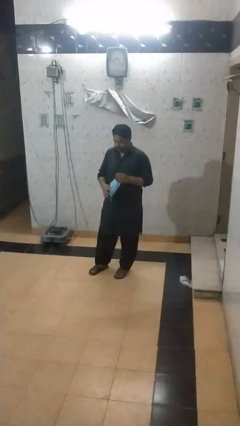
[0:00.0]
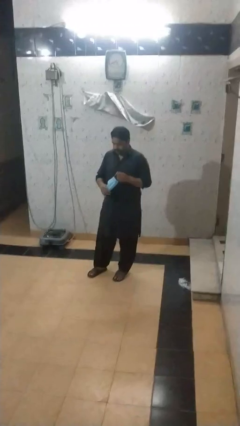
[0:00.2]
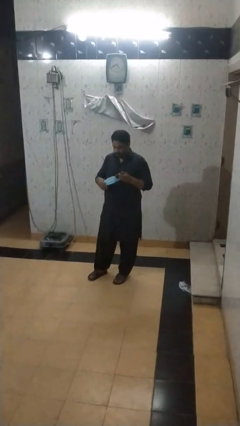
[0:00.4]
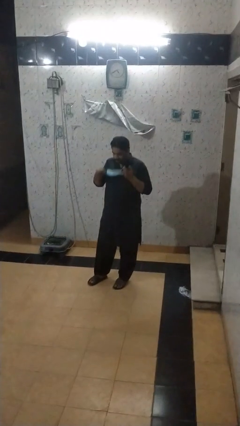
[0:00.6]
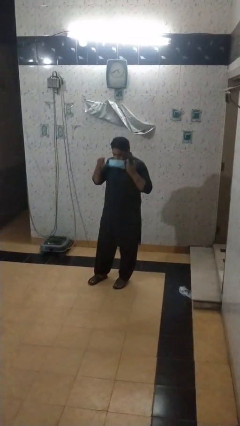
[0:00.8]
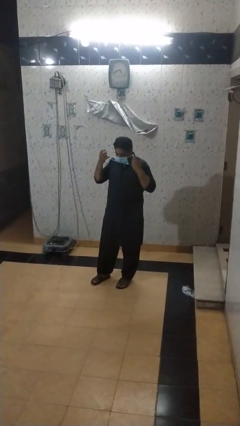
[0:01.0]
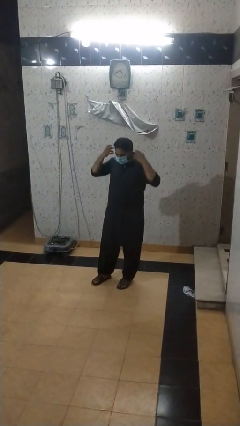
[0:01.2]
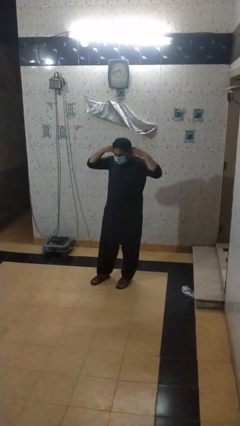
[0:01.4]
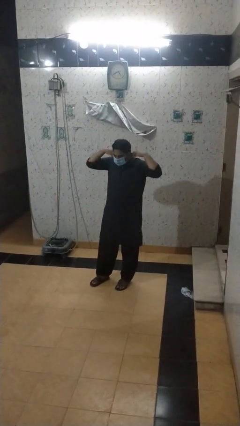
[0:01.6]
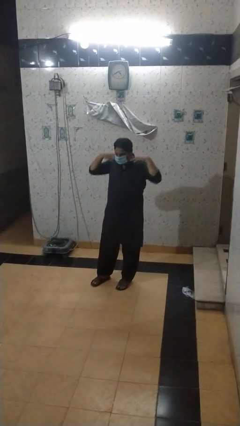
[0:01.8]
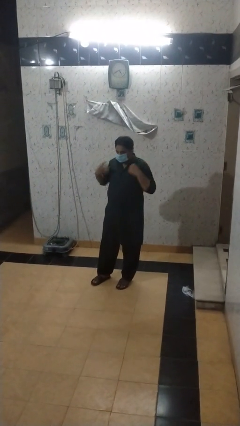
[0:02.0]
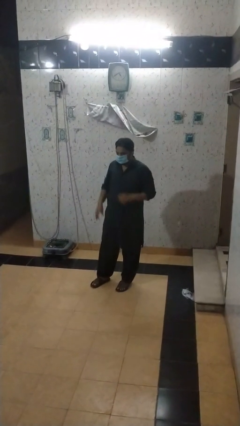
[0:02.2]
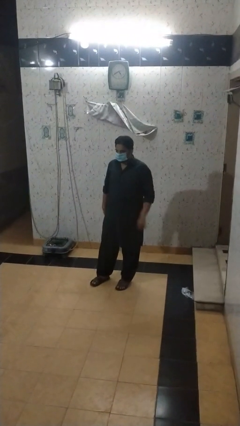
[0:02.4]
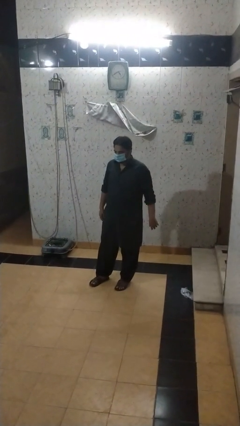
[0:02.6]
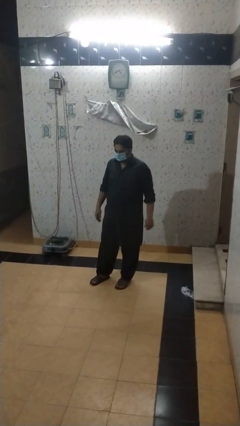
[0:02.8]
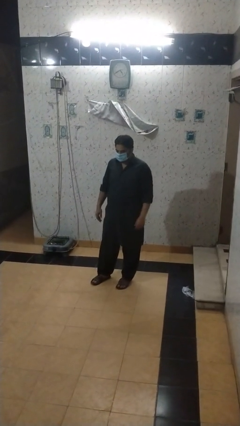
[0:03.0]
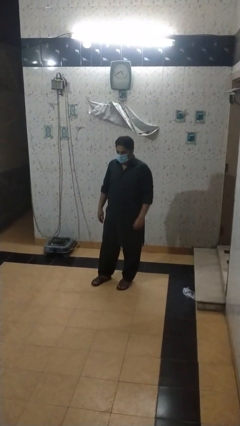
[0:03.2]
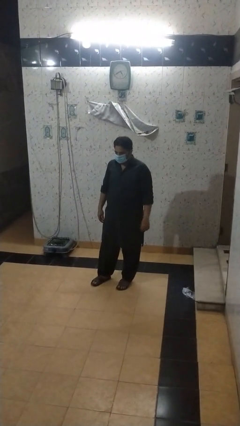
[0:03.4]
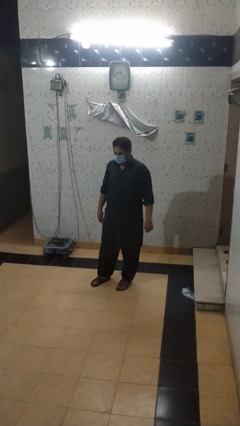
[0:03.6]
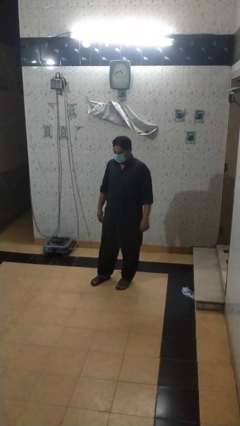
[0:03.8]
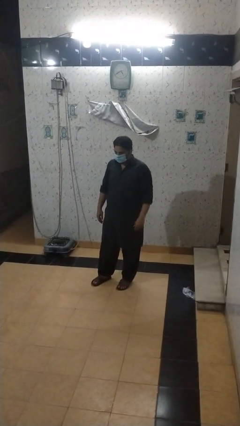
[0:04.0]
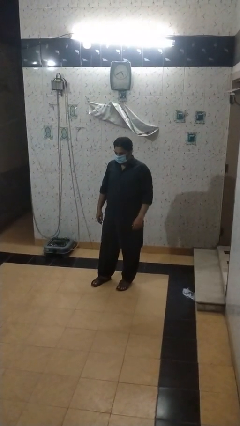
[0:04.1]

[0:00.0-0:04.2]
person puts on facemask

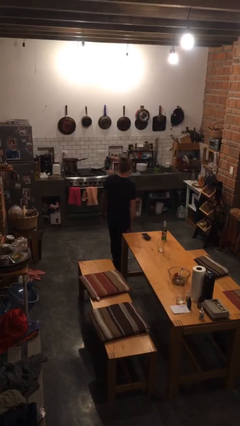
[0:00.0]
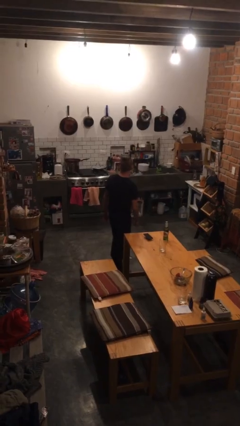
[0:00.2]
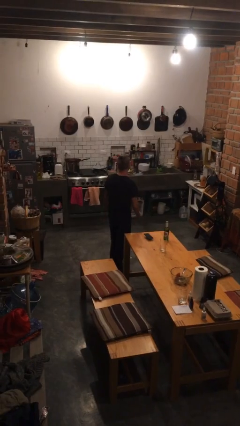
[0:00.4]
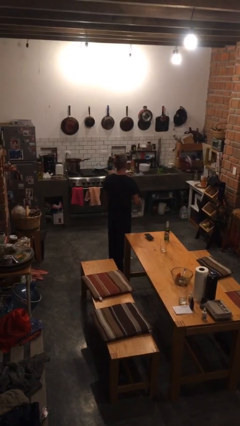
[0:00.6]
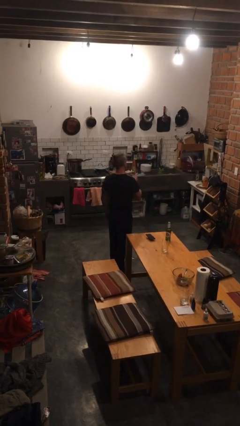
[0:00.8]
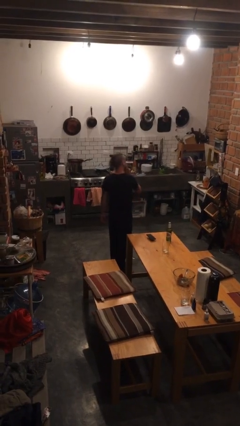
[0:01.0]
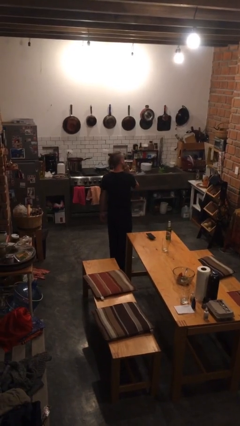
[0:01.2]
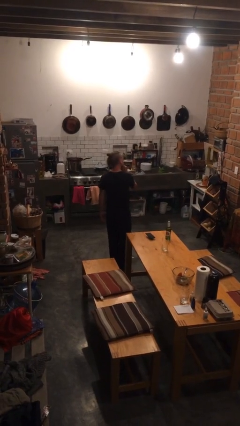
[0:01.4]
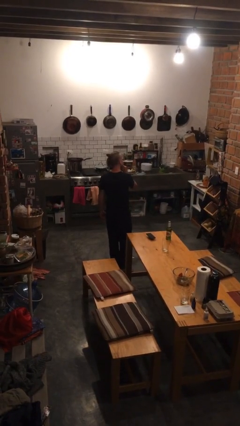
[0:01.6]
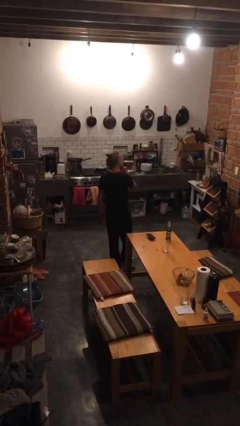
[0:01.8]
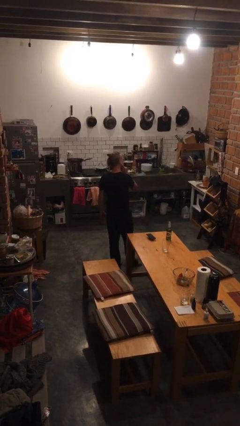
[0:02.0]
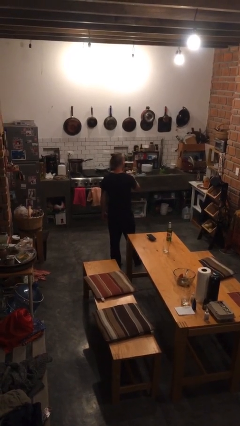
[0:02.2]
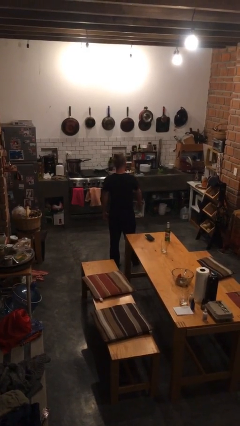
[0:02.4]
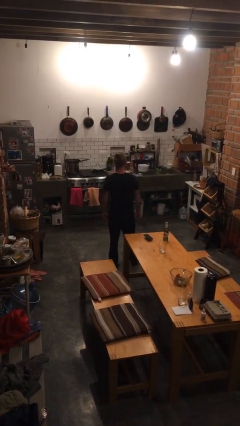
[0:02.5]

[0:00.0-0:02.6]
person gestures be quiet

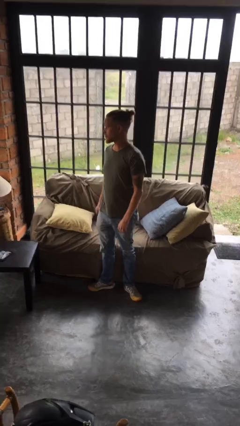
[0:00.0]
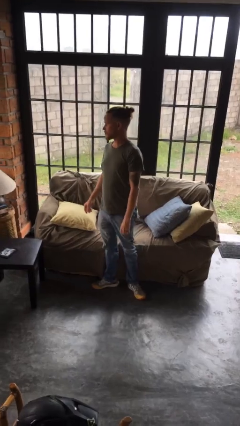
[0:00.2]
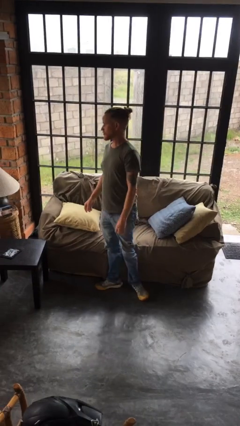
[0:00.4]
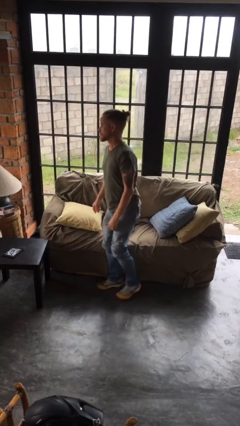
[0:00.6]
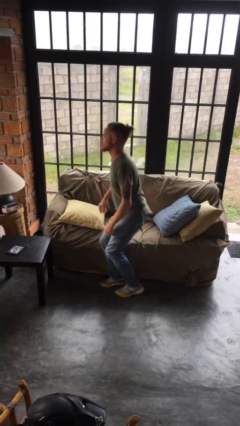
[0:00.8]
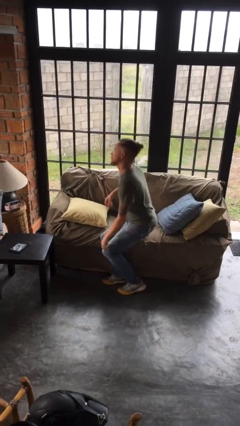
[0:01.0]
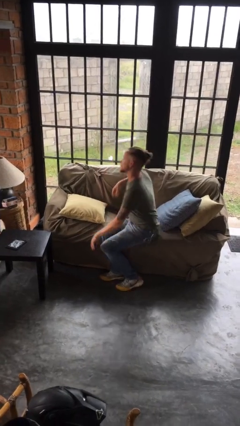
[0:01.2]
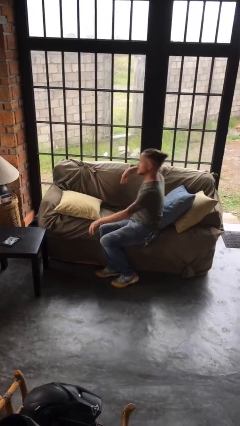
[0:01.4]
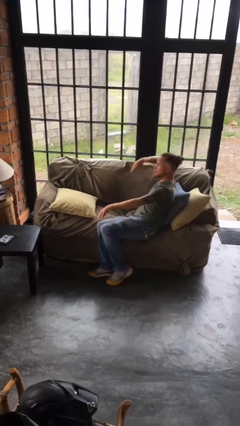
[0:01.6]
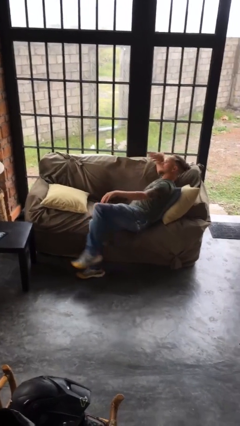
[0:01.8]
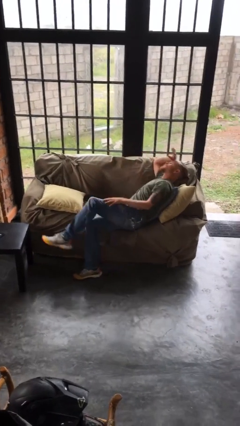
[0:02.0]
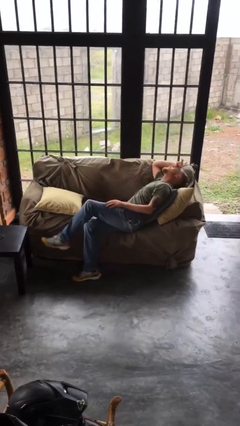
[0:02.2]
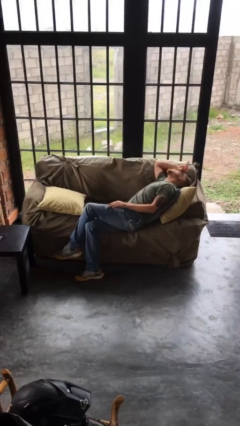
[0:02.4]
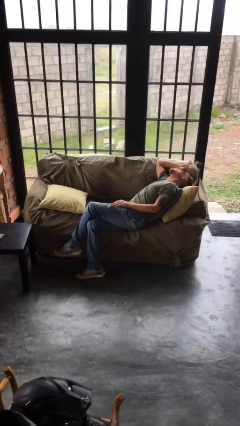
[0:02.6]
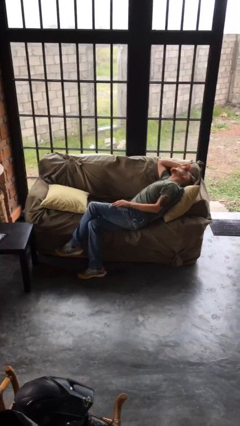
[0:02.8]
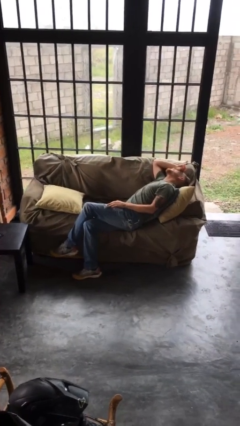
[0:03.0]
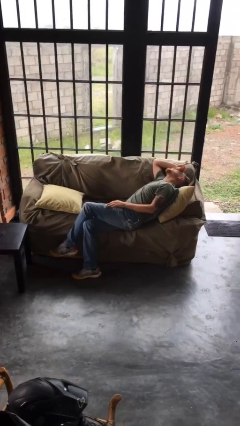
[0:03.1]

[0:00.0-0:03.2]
person lies down on couch

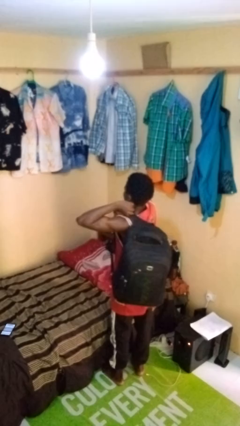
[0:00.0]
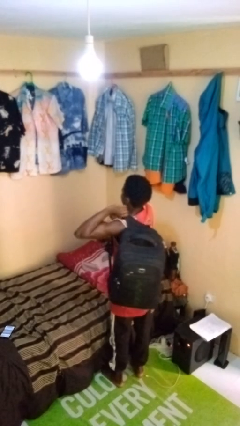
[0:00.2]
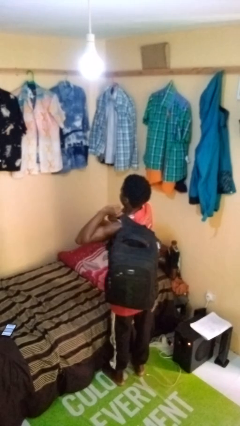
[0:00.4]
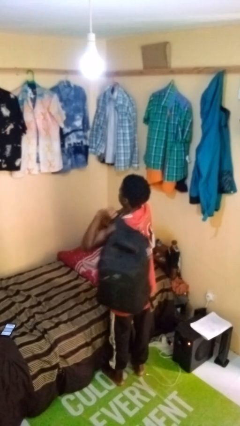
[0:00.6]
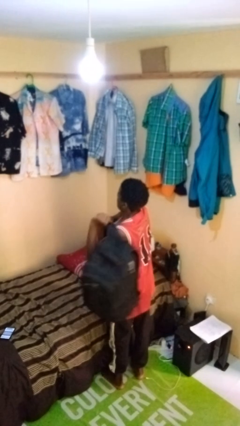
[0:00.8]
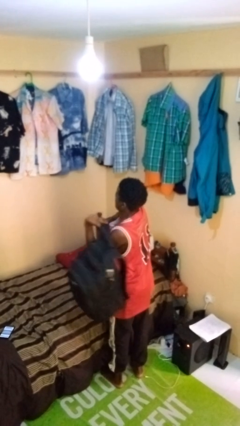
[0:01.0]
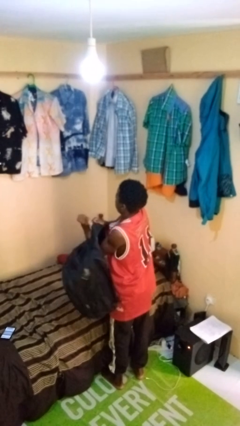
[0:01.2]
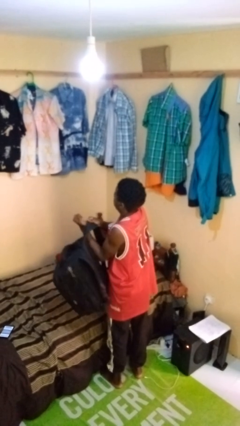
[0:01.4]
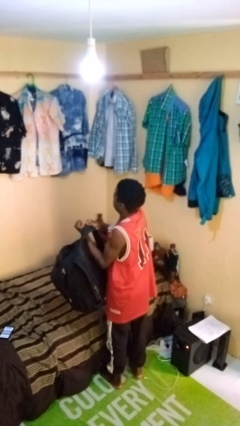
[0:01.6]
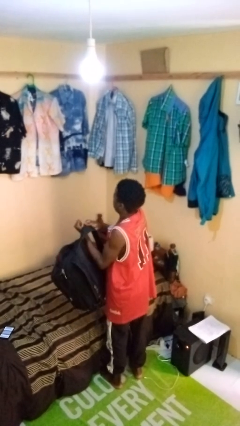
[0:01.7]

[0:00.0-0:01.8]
person takes off backpack

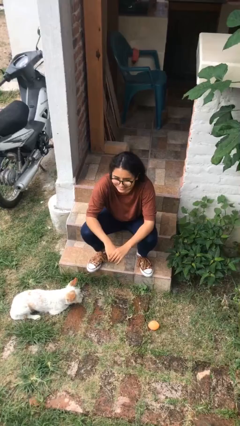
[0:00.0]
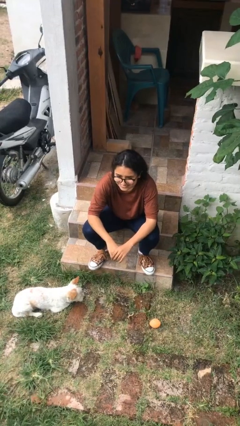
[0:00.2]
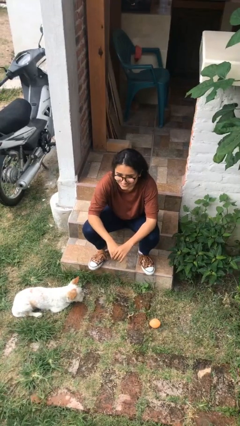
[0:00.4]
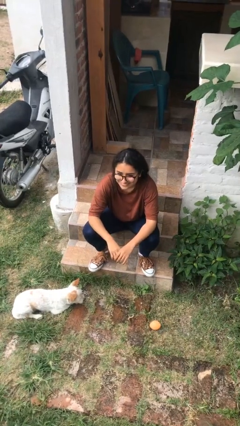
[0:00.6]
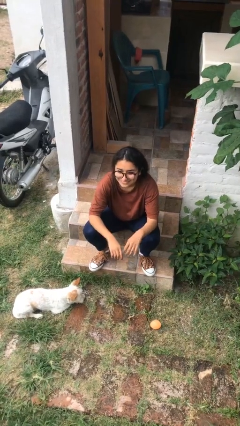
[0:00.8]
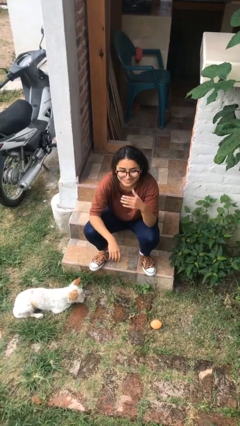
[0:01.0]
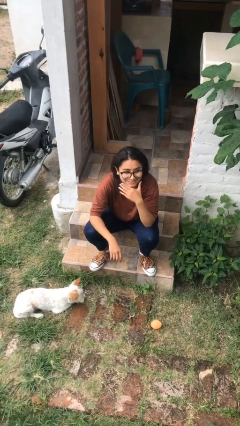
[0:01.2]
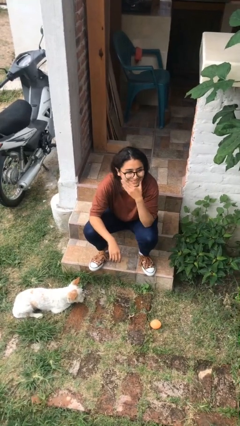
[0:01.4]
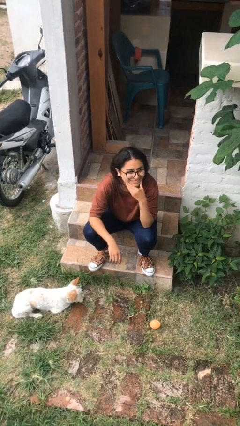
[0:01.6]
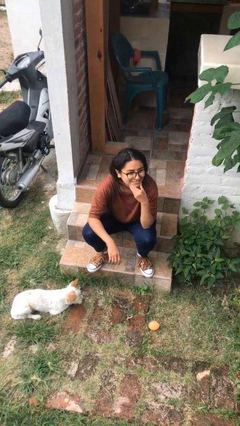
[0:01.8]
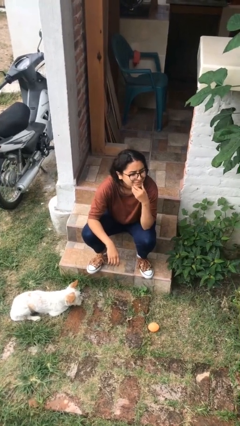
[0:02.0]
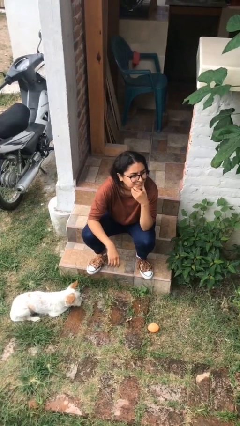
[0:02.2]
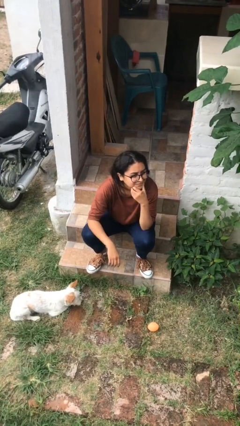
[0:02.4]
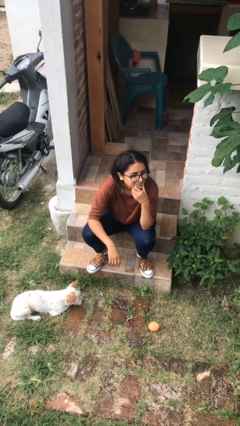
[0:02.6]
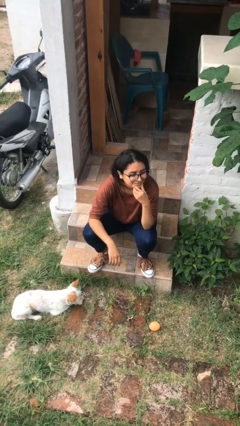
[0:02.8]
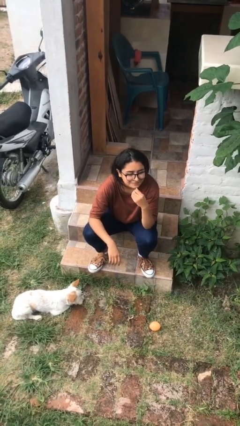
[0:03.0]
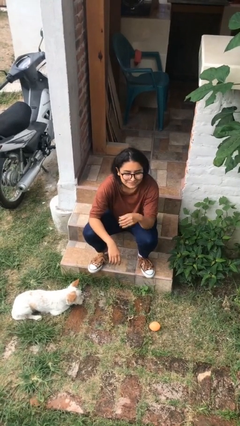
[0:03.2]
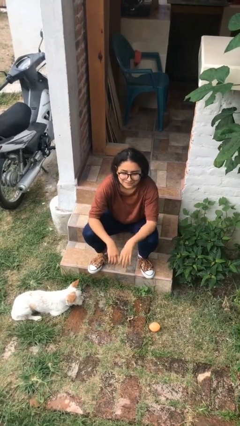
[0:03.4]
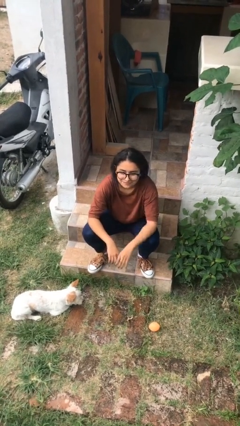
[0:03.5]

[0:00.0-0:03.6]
person strokes chin

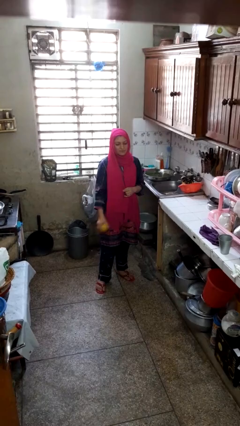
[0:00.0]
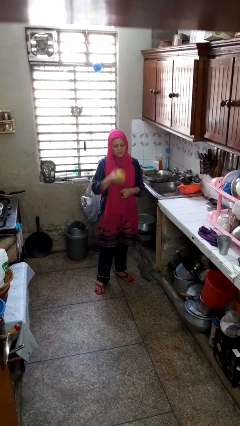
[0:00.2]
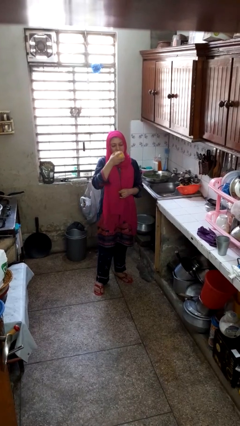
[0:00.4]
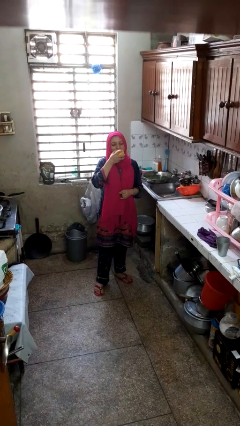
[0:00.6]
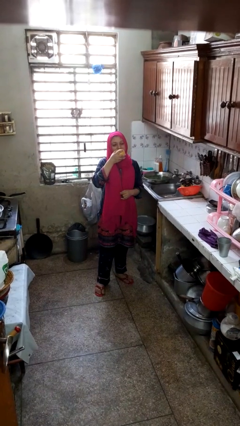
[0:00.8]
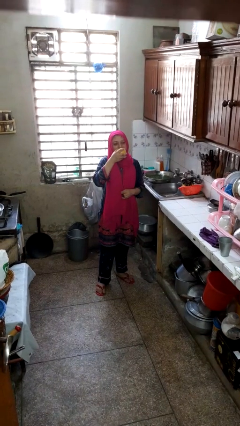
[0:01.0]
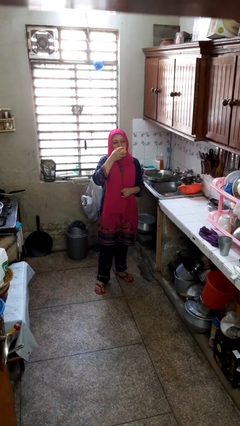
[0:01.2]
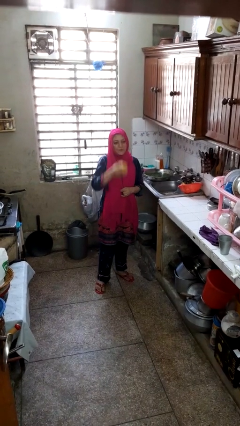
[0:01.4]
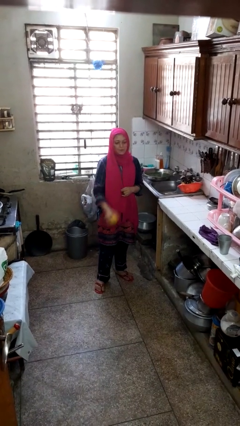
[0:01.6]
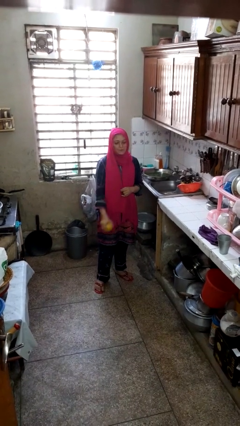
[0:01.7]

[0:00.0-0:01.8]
person eats apple
